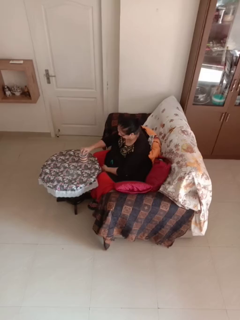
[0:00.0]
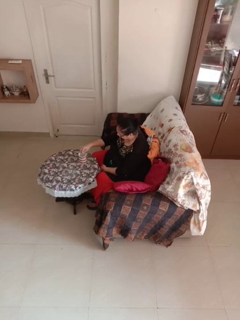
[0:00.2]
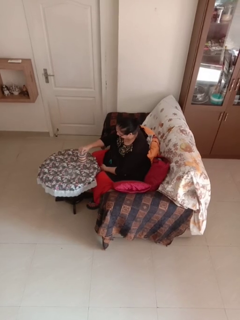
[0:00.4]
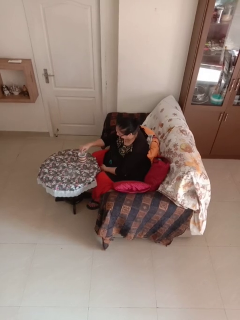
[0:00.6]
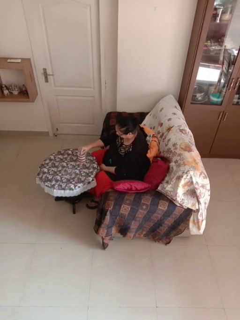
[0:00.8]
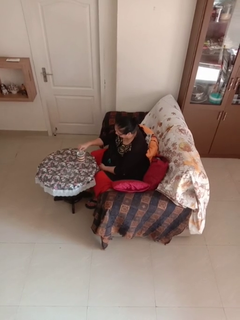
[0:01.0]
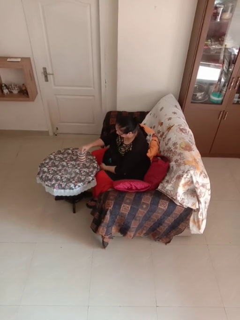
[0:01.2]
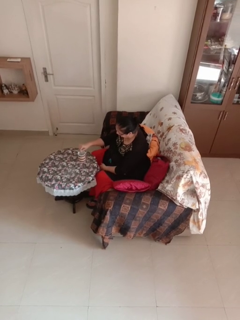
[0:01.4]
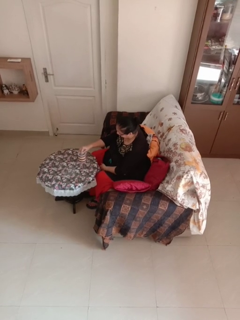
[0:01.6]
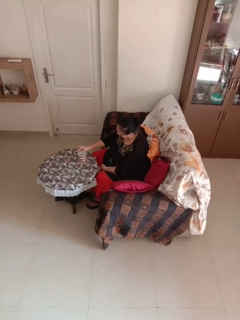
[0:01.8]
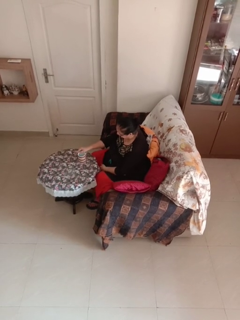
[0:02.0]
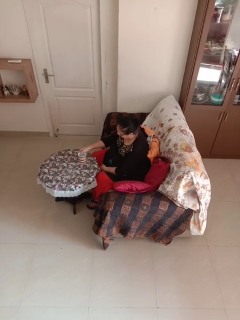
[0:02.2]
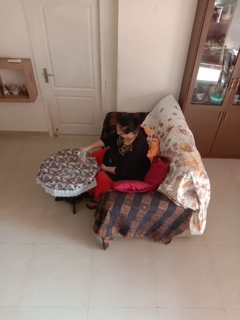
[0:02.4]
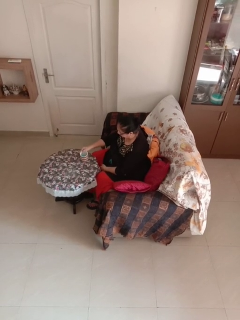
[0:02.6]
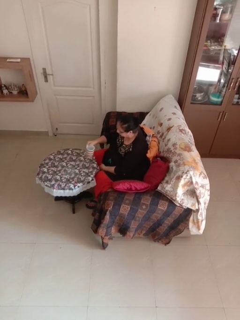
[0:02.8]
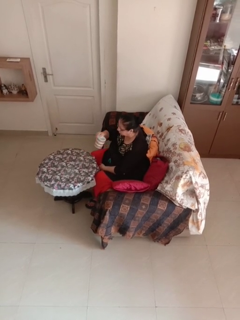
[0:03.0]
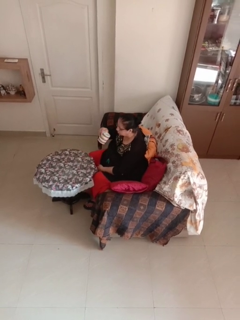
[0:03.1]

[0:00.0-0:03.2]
person stirs mug

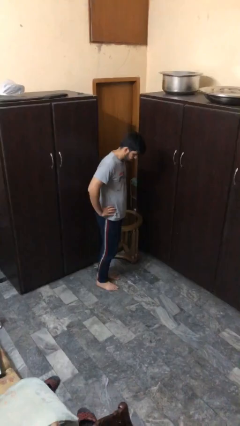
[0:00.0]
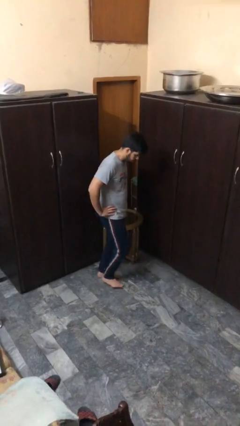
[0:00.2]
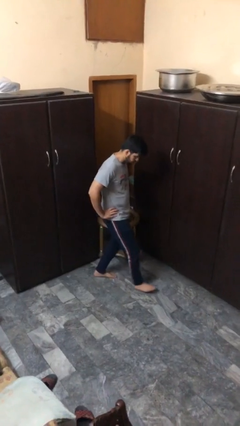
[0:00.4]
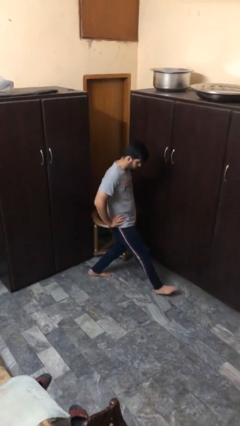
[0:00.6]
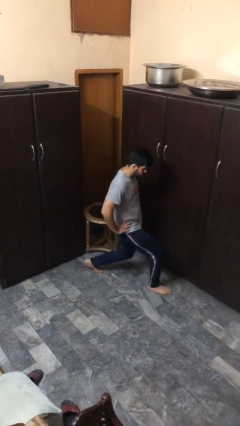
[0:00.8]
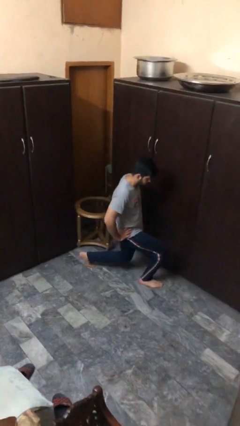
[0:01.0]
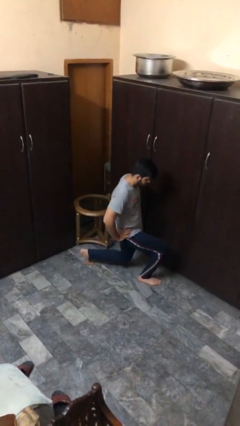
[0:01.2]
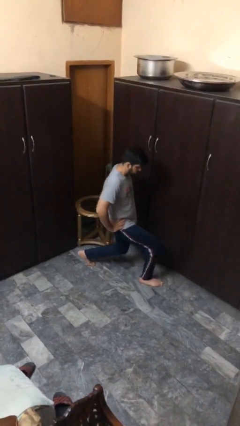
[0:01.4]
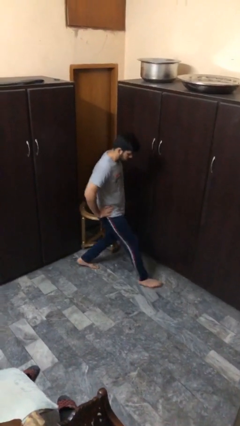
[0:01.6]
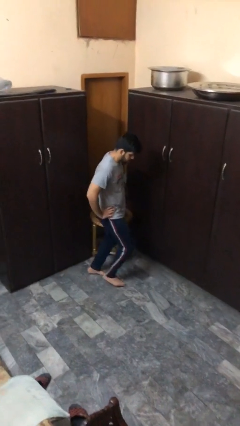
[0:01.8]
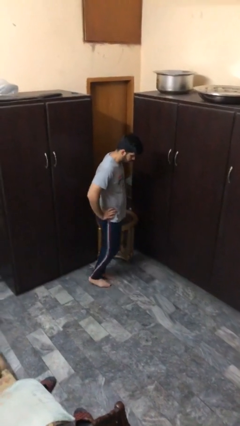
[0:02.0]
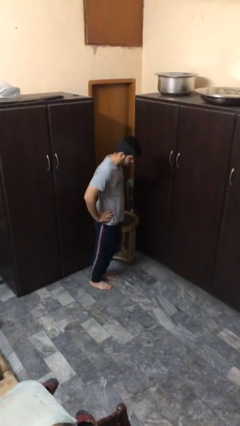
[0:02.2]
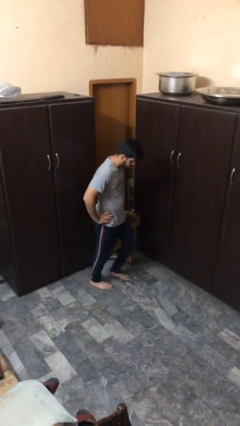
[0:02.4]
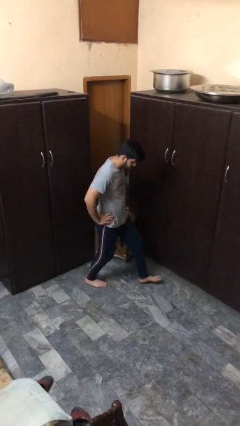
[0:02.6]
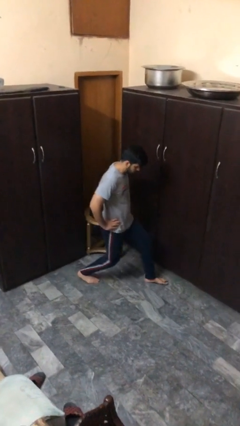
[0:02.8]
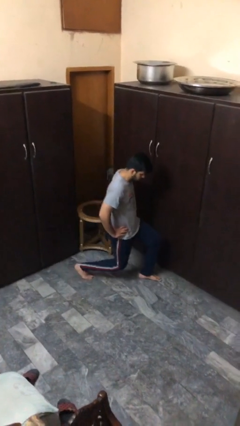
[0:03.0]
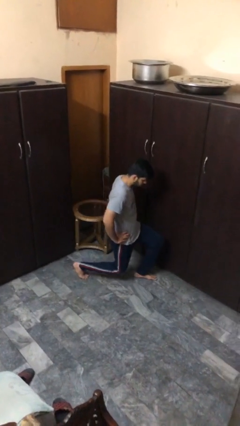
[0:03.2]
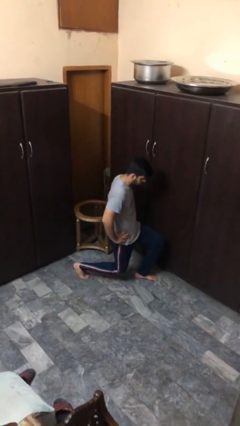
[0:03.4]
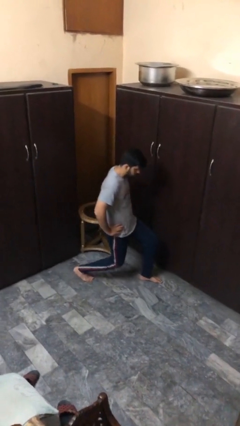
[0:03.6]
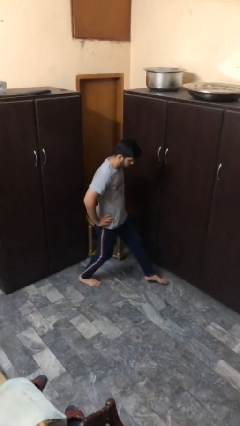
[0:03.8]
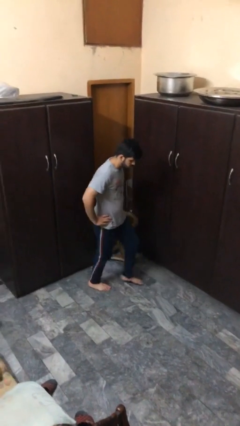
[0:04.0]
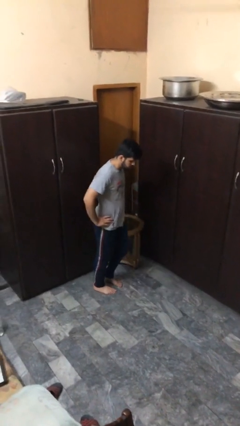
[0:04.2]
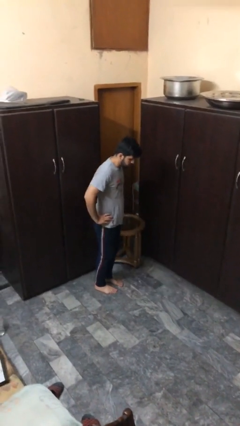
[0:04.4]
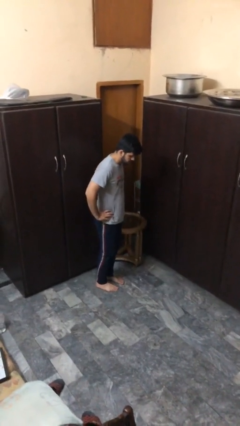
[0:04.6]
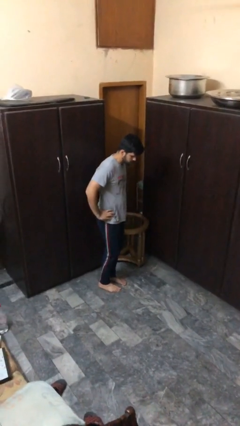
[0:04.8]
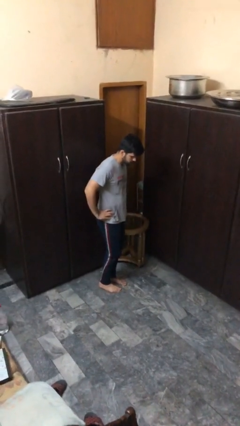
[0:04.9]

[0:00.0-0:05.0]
person exercises with lunges

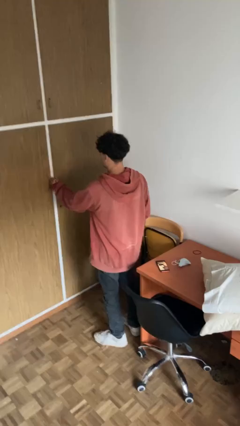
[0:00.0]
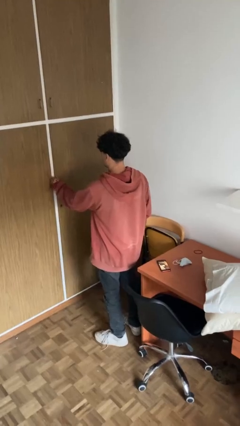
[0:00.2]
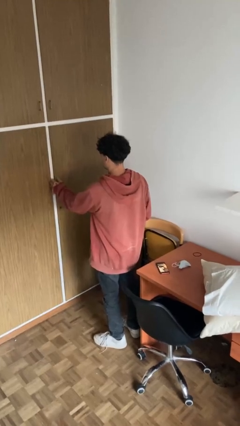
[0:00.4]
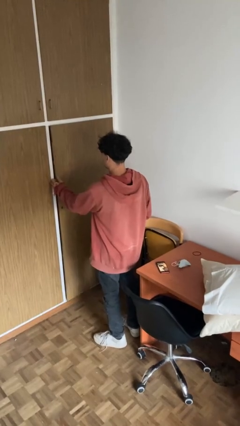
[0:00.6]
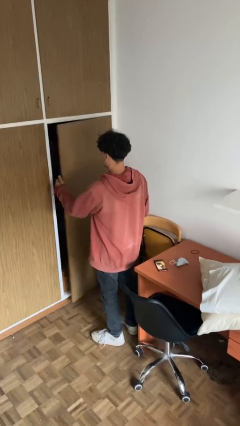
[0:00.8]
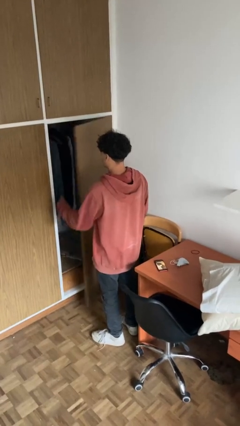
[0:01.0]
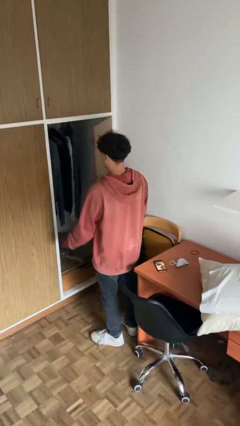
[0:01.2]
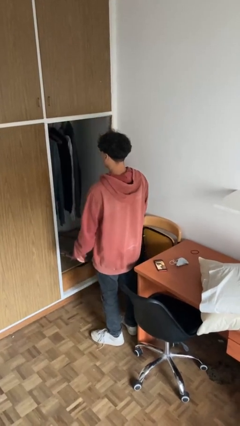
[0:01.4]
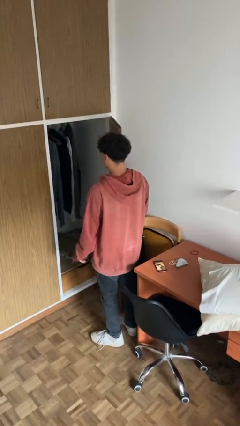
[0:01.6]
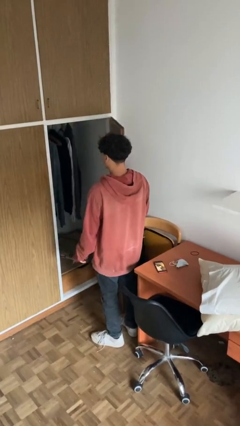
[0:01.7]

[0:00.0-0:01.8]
person opens closet door

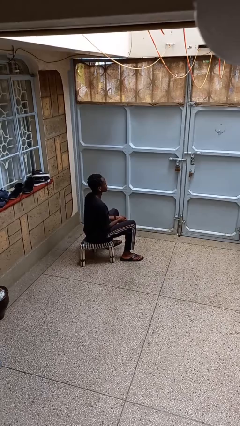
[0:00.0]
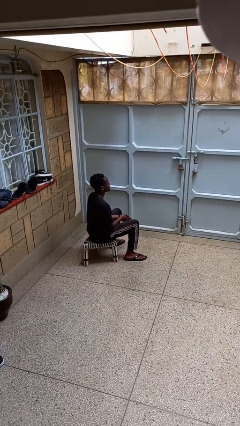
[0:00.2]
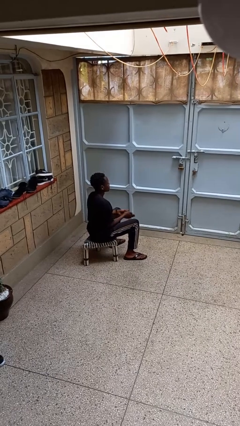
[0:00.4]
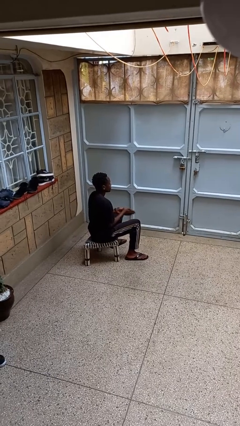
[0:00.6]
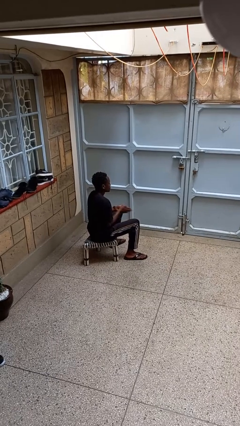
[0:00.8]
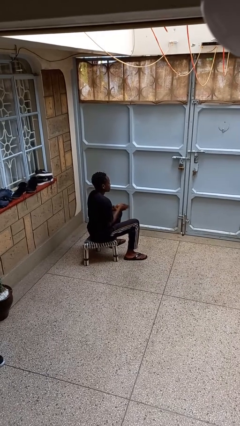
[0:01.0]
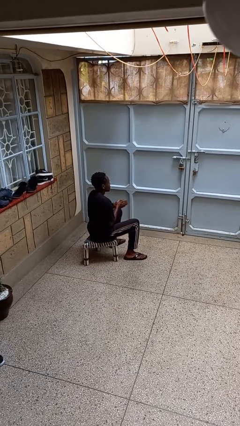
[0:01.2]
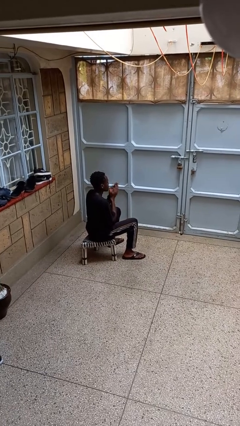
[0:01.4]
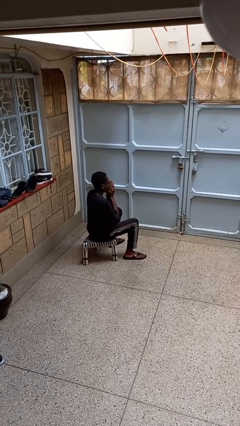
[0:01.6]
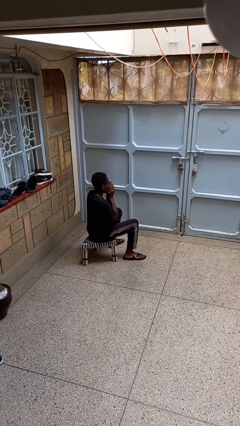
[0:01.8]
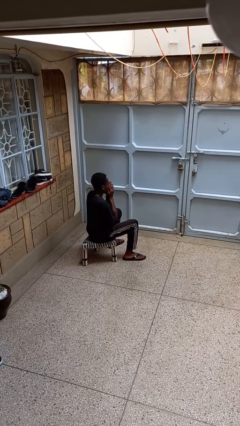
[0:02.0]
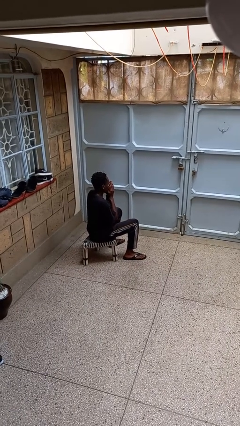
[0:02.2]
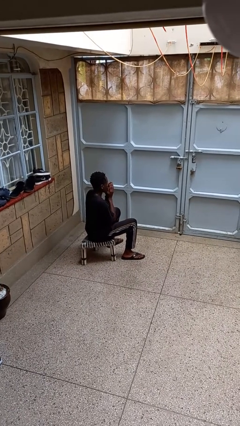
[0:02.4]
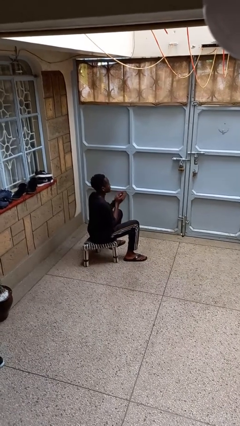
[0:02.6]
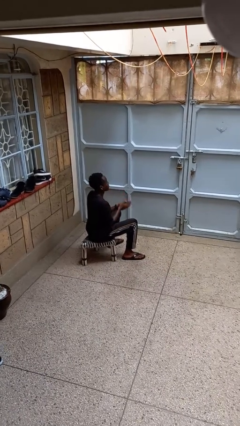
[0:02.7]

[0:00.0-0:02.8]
person blows into hands

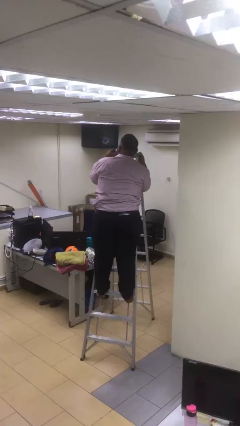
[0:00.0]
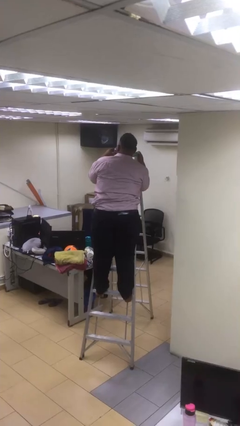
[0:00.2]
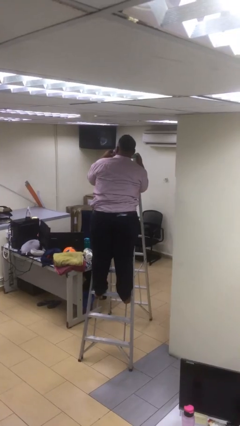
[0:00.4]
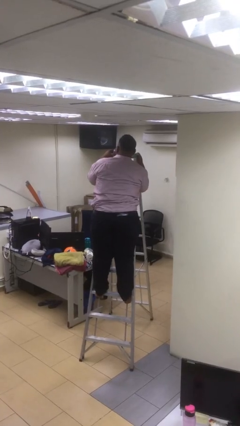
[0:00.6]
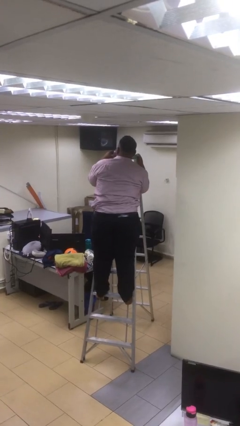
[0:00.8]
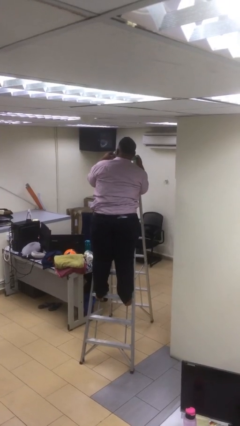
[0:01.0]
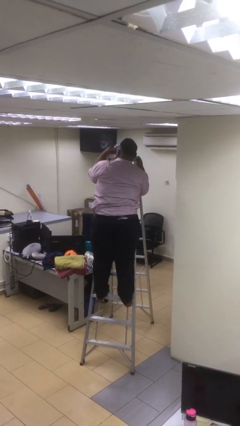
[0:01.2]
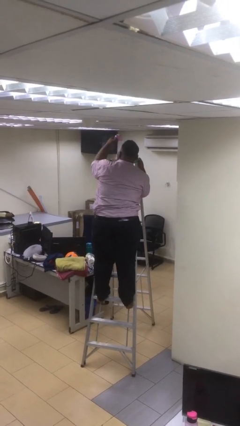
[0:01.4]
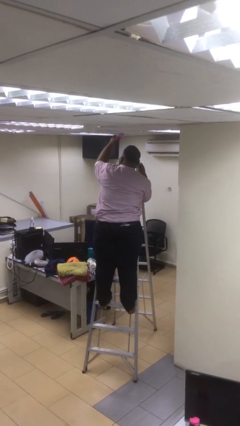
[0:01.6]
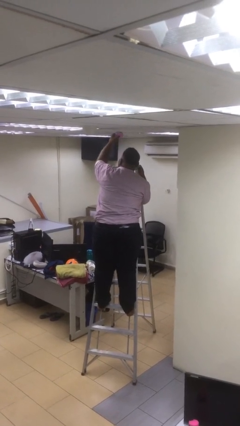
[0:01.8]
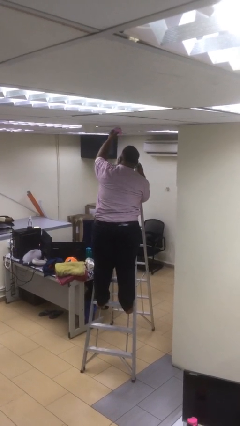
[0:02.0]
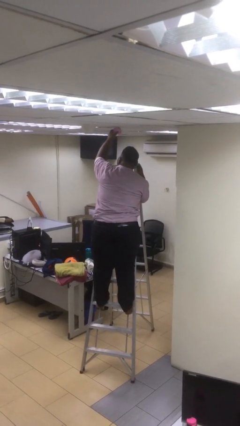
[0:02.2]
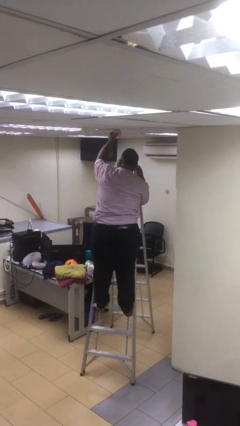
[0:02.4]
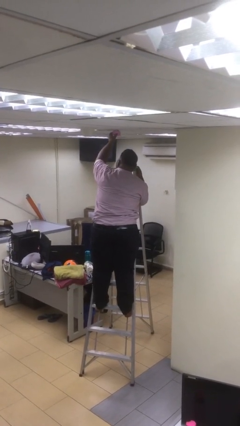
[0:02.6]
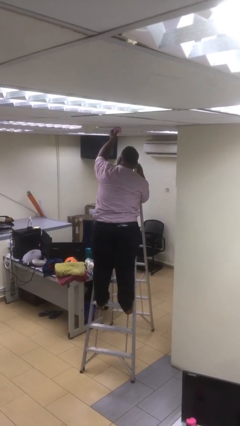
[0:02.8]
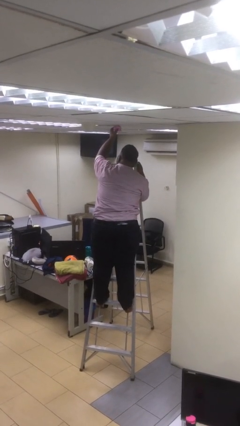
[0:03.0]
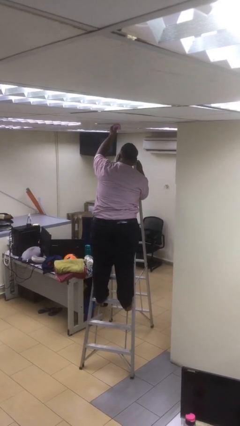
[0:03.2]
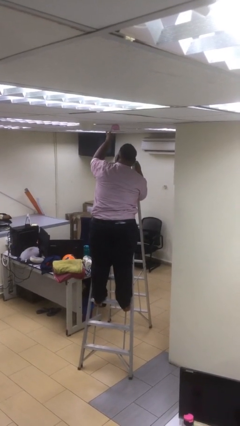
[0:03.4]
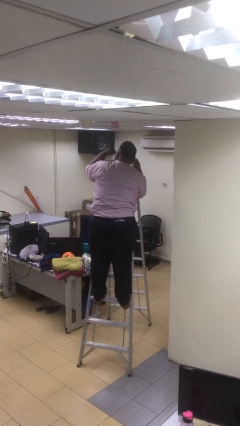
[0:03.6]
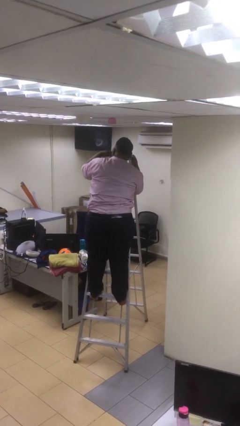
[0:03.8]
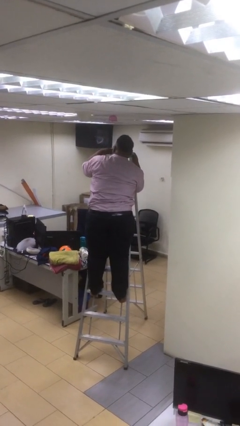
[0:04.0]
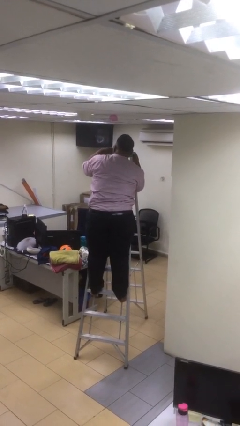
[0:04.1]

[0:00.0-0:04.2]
person puts up smoke detector

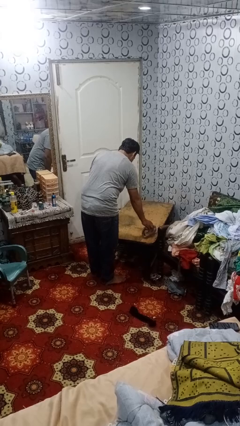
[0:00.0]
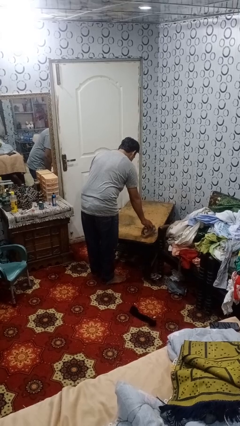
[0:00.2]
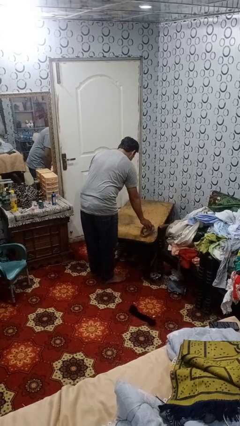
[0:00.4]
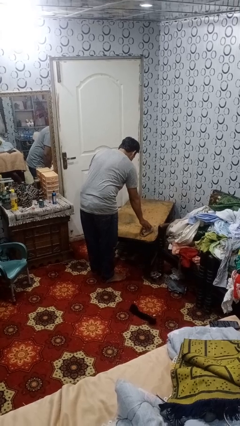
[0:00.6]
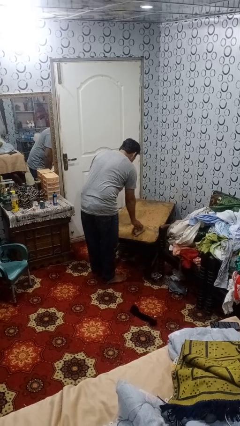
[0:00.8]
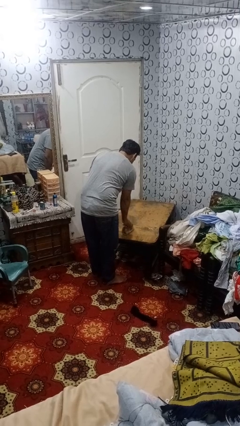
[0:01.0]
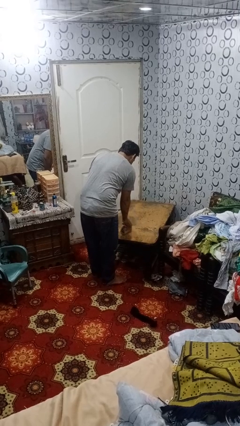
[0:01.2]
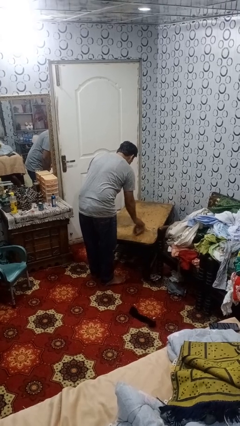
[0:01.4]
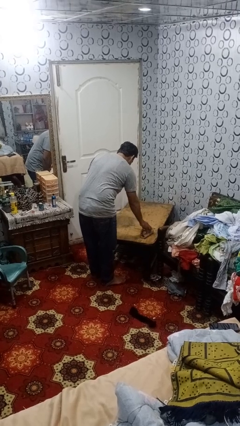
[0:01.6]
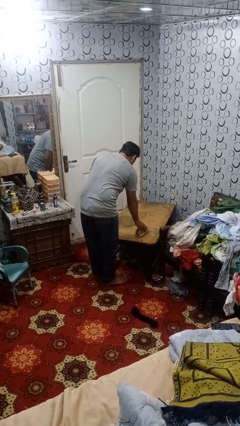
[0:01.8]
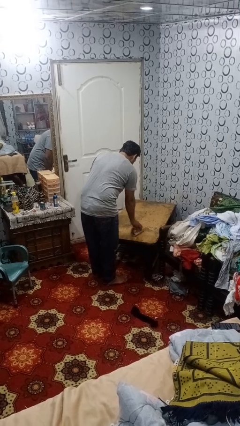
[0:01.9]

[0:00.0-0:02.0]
person cleans table with rag
